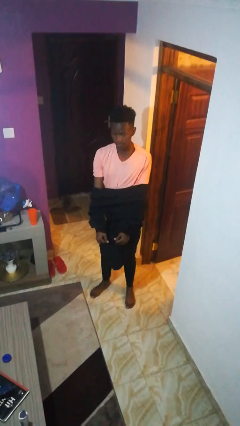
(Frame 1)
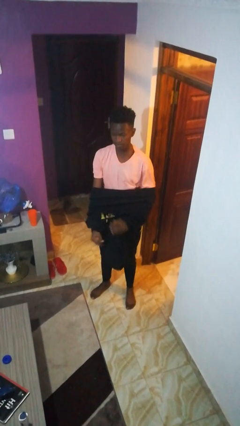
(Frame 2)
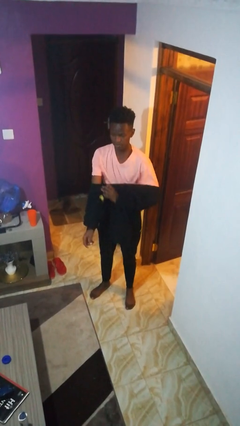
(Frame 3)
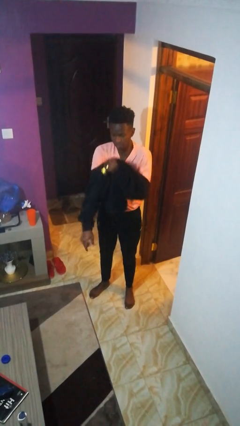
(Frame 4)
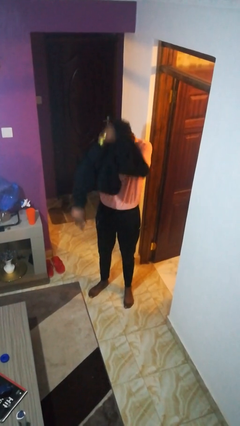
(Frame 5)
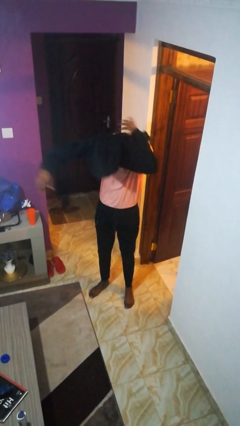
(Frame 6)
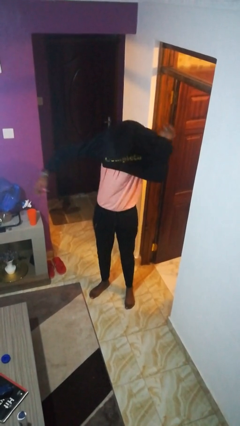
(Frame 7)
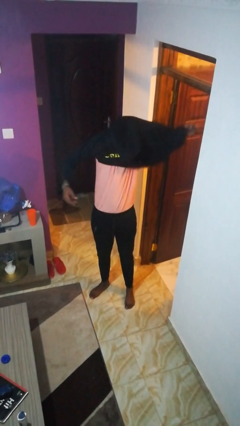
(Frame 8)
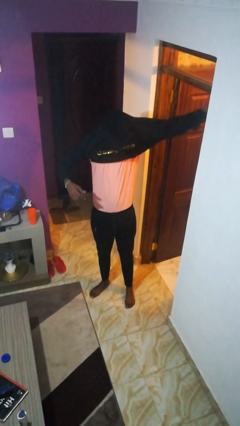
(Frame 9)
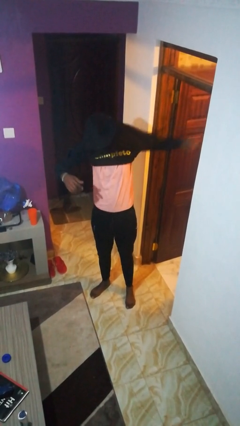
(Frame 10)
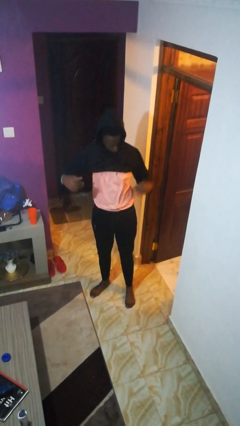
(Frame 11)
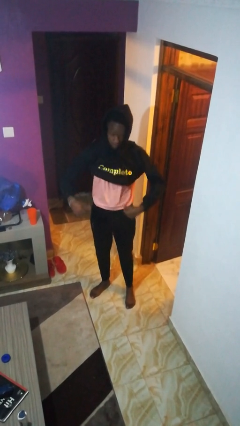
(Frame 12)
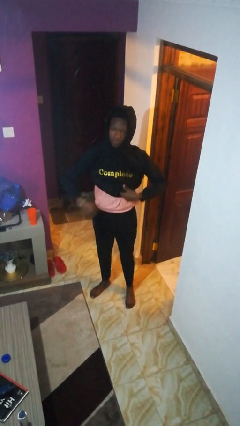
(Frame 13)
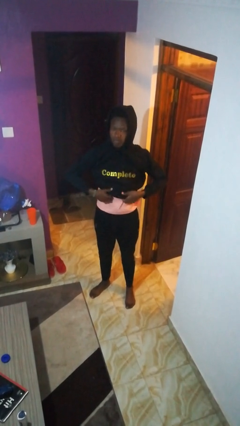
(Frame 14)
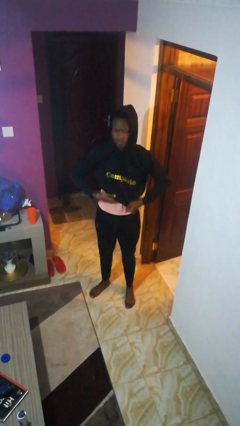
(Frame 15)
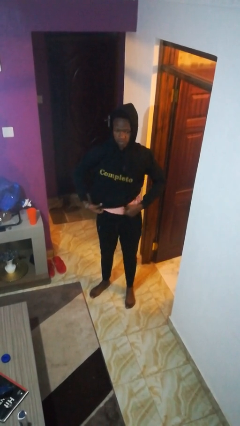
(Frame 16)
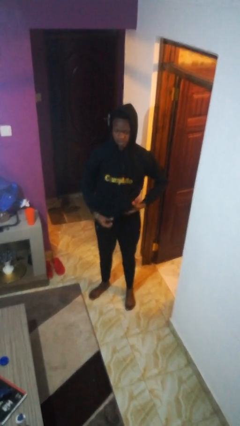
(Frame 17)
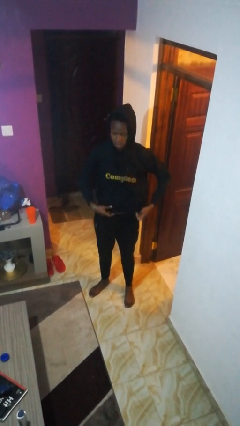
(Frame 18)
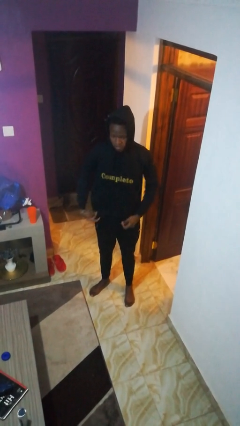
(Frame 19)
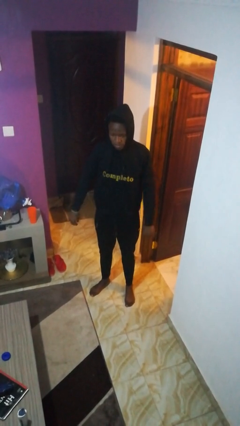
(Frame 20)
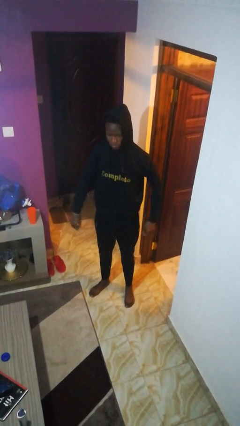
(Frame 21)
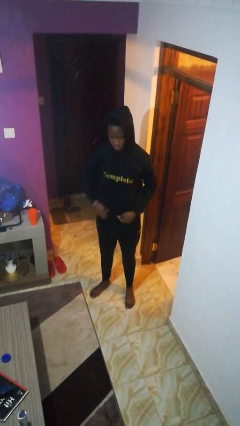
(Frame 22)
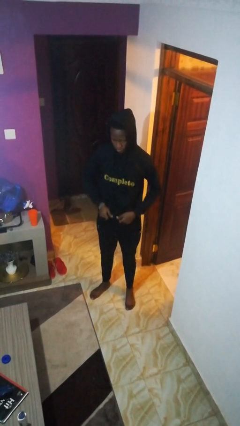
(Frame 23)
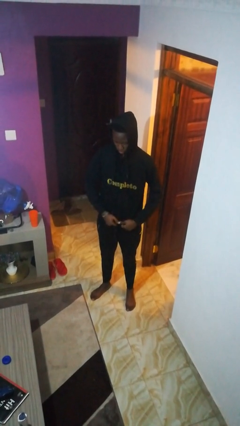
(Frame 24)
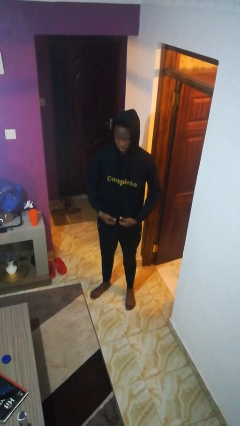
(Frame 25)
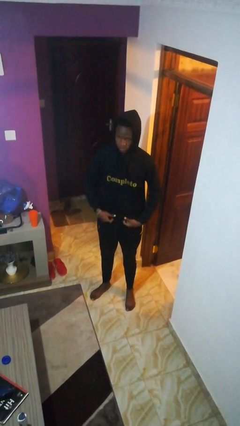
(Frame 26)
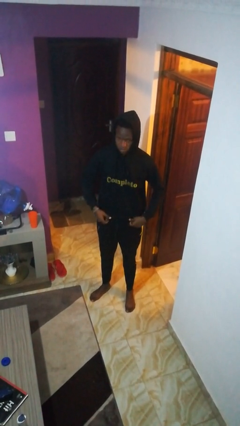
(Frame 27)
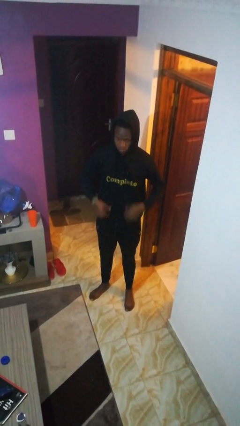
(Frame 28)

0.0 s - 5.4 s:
person puts on hoodie

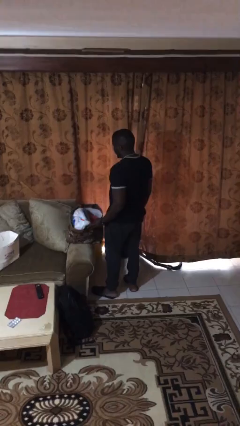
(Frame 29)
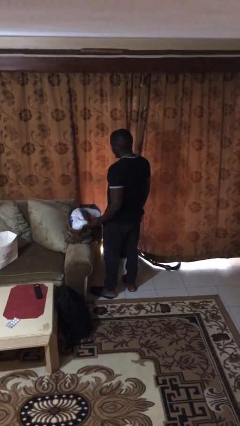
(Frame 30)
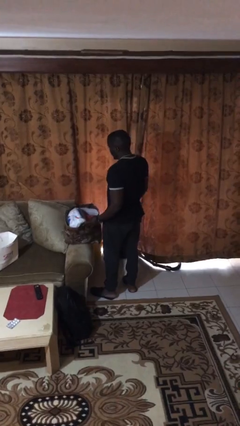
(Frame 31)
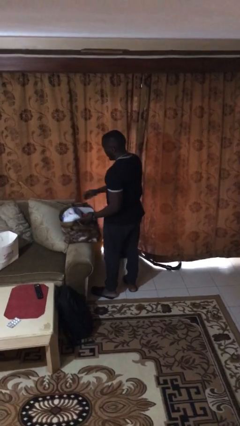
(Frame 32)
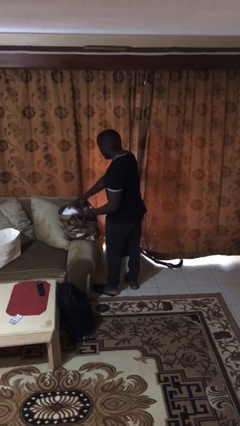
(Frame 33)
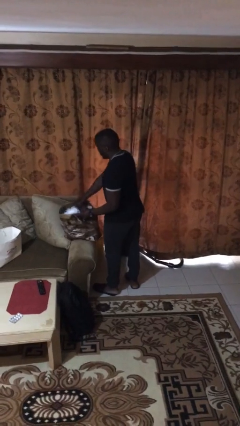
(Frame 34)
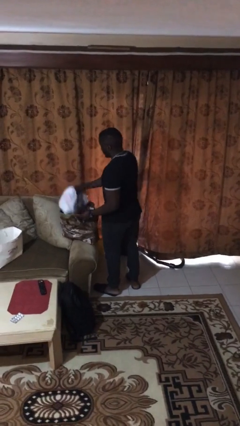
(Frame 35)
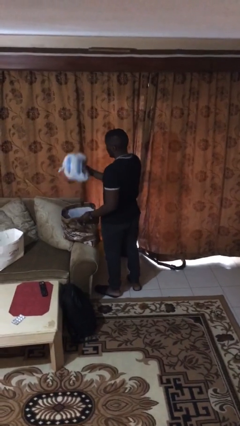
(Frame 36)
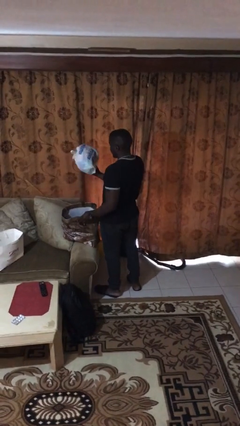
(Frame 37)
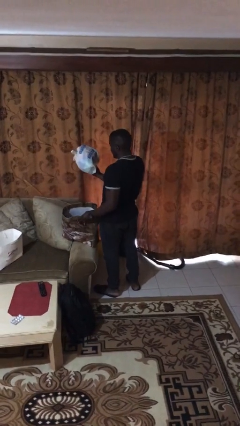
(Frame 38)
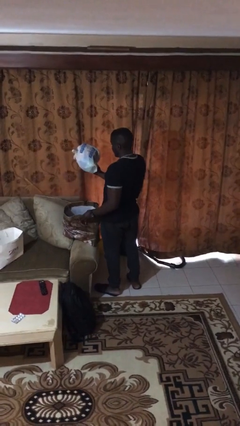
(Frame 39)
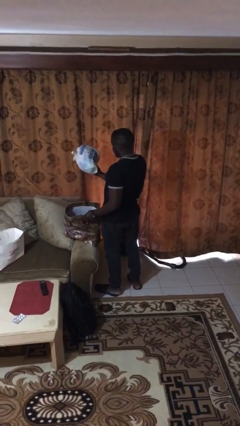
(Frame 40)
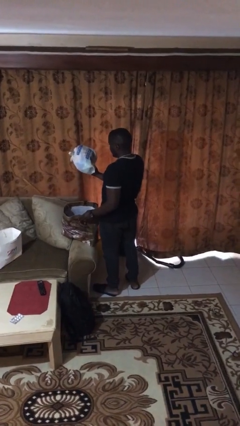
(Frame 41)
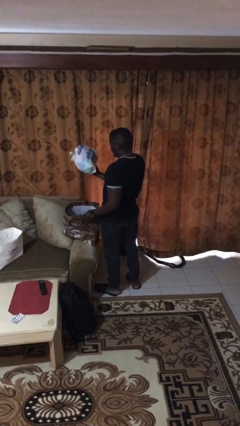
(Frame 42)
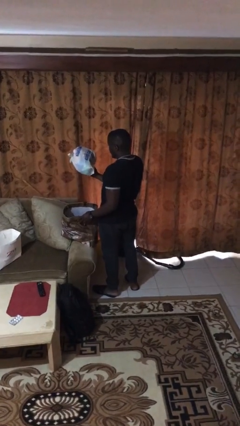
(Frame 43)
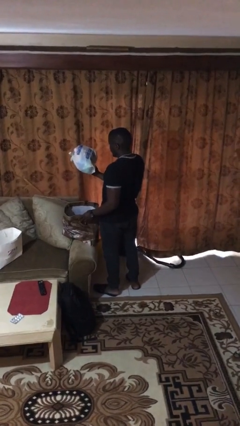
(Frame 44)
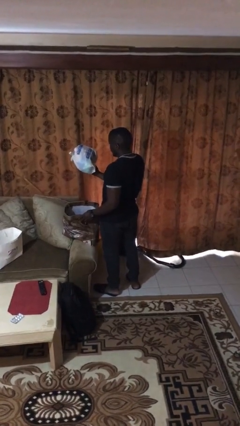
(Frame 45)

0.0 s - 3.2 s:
person takes object from bag

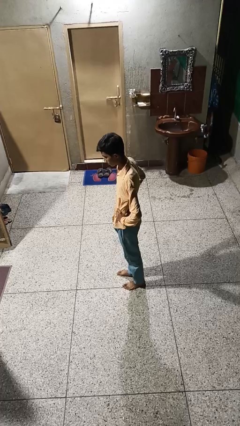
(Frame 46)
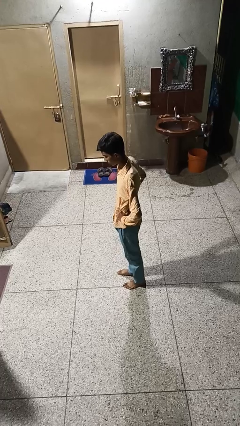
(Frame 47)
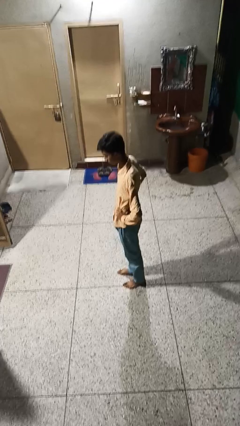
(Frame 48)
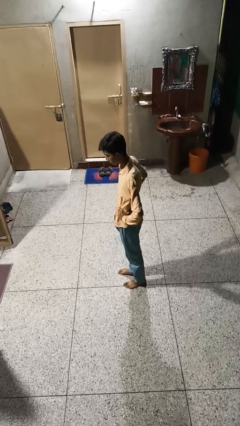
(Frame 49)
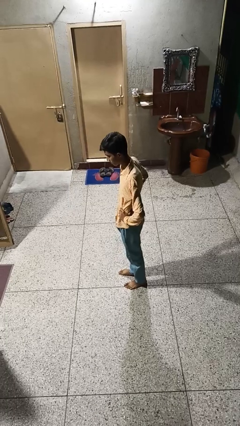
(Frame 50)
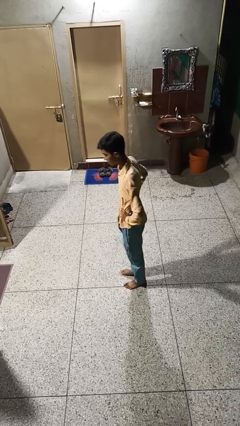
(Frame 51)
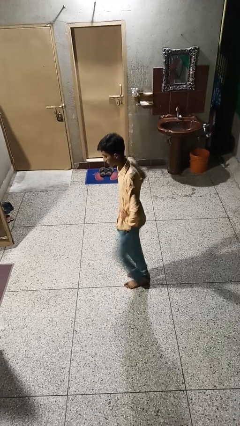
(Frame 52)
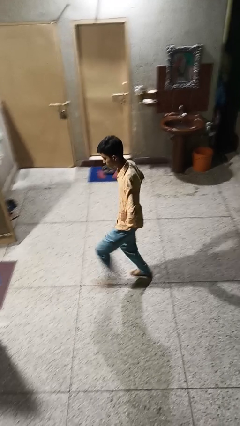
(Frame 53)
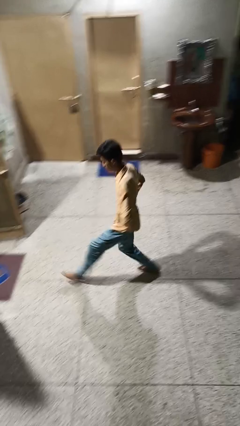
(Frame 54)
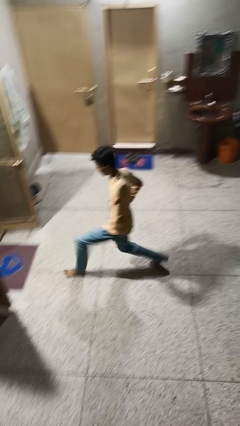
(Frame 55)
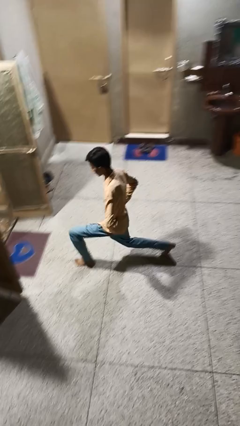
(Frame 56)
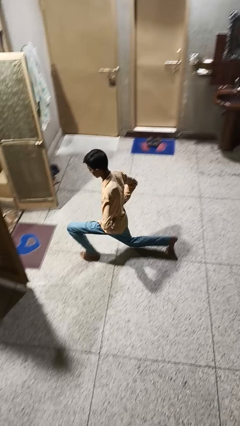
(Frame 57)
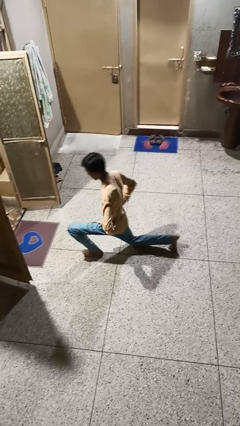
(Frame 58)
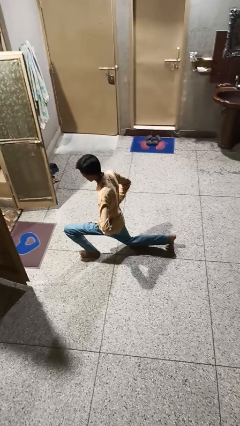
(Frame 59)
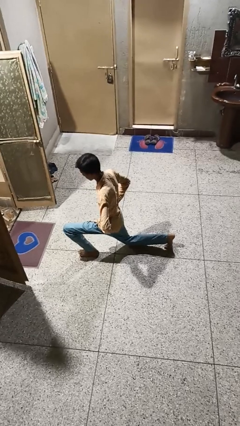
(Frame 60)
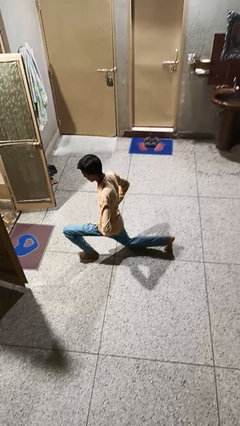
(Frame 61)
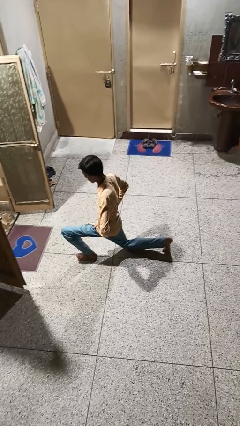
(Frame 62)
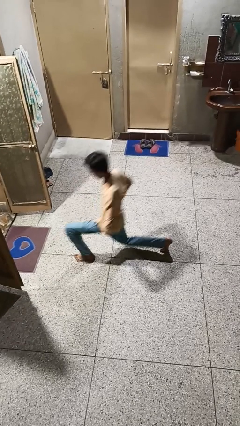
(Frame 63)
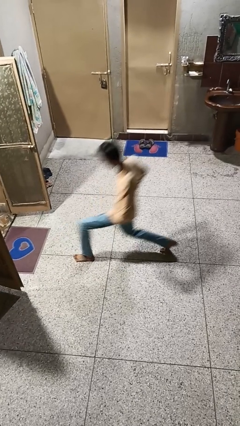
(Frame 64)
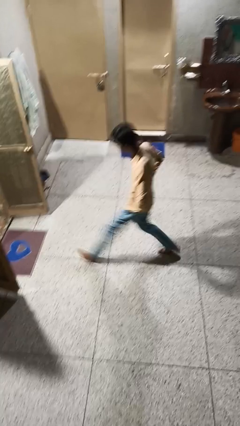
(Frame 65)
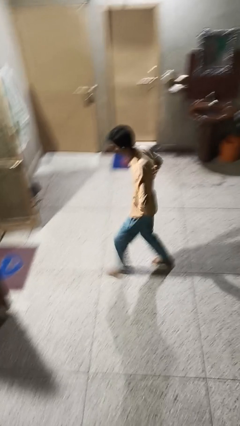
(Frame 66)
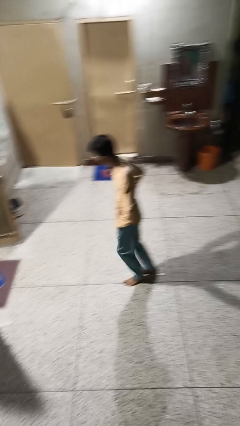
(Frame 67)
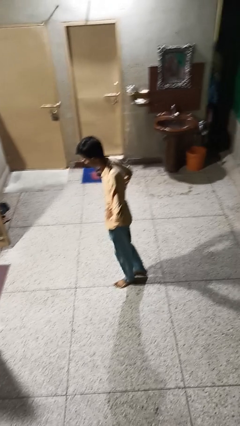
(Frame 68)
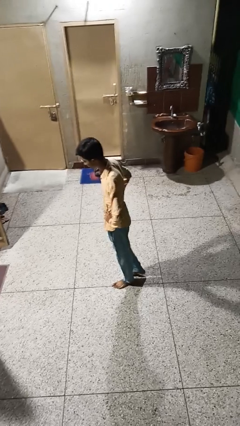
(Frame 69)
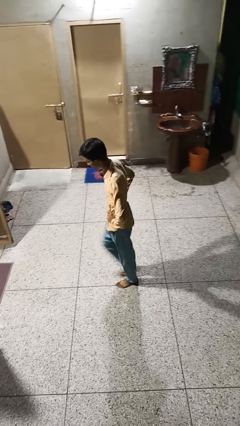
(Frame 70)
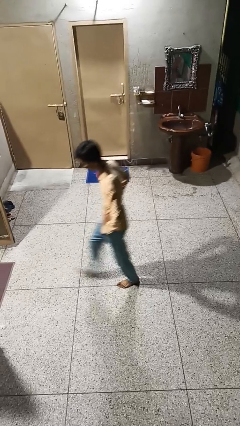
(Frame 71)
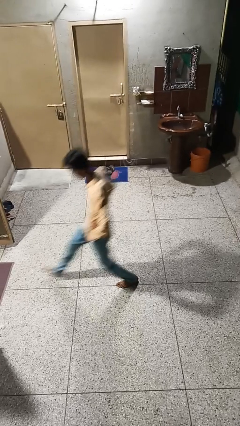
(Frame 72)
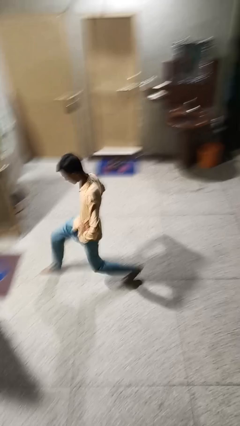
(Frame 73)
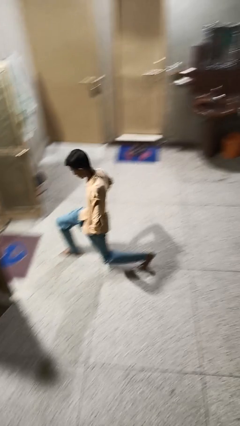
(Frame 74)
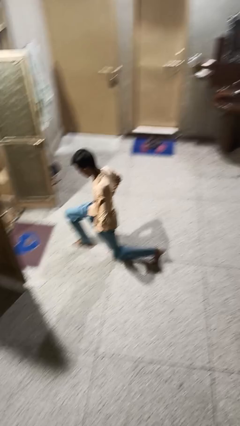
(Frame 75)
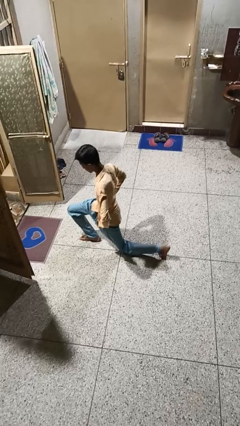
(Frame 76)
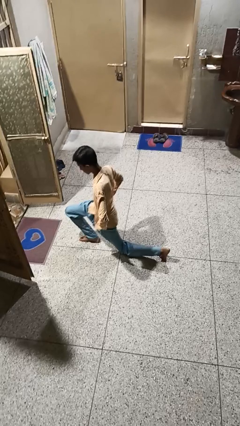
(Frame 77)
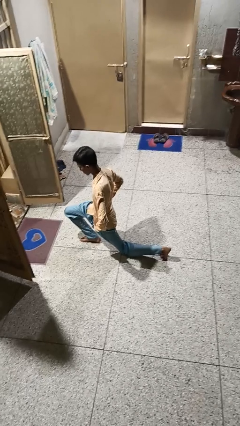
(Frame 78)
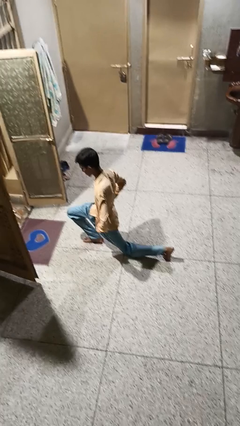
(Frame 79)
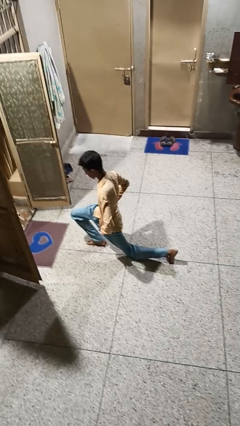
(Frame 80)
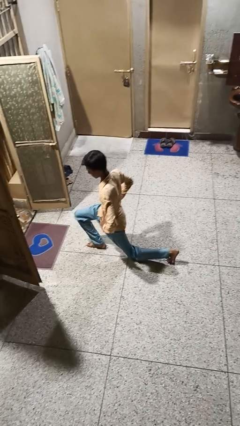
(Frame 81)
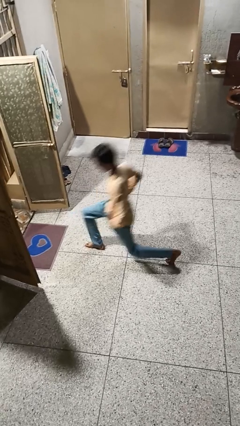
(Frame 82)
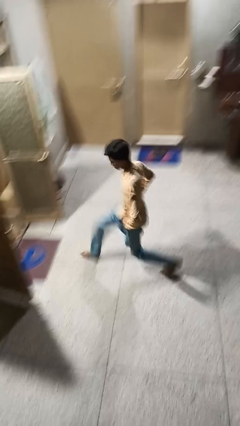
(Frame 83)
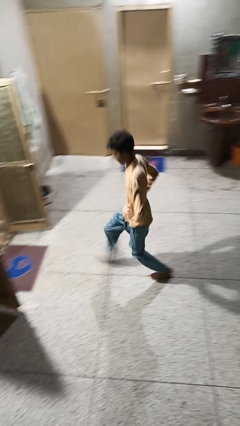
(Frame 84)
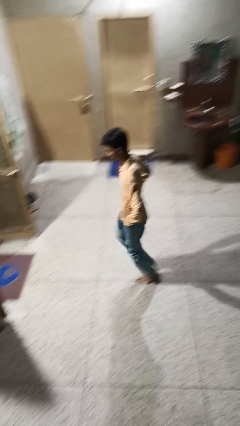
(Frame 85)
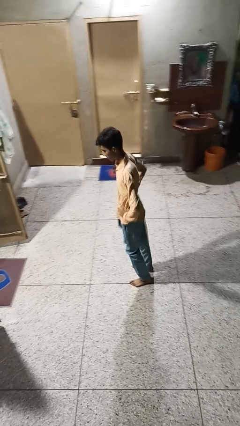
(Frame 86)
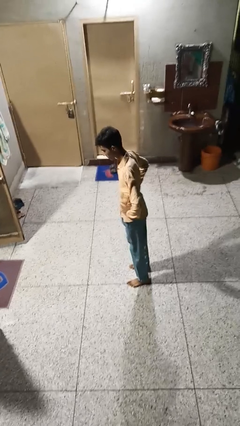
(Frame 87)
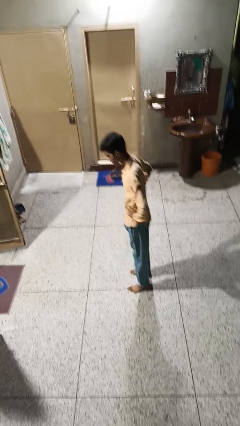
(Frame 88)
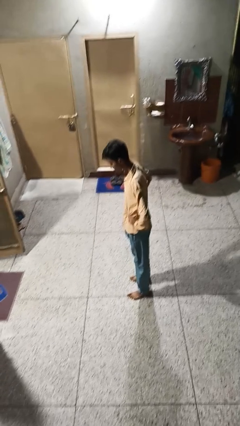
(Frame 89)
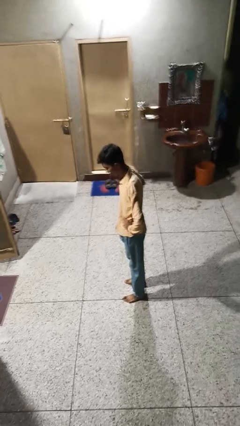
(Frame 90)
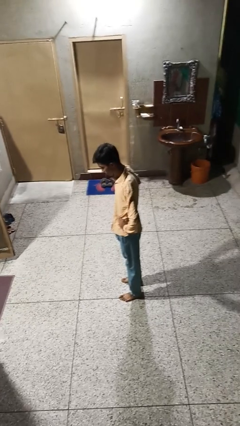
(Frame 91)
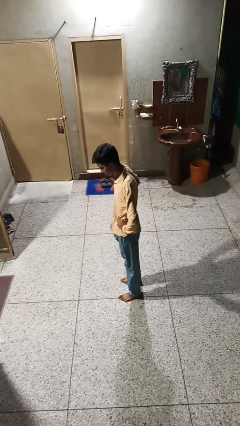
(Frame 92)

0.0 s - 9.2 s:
person exercises with lunges
